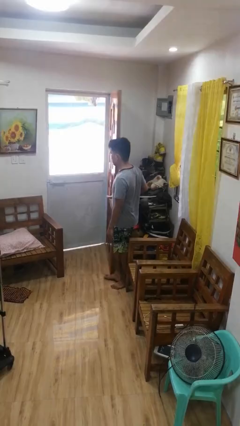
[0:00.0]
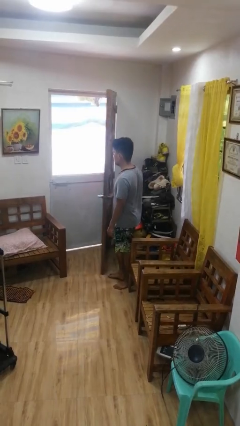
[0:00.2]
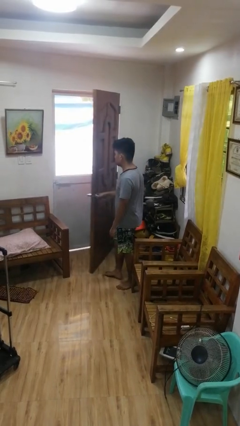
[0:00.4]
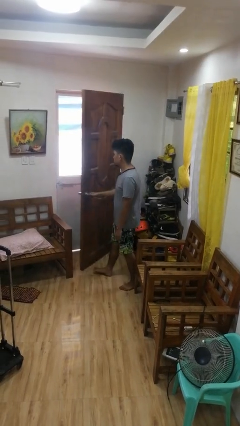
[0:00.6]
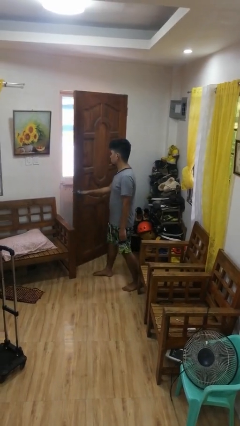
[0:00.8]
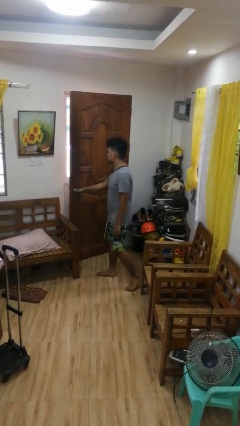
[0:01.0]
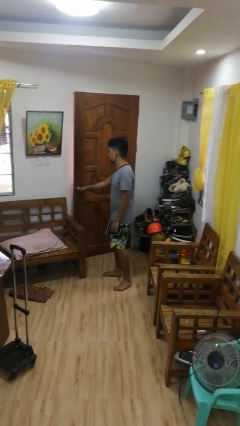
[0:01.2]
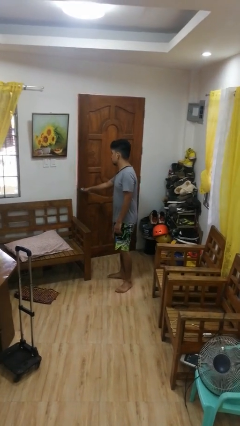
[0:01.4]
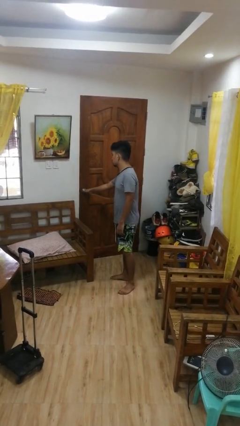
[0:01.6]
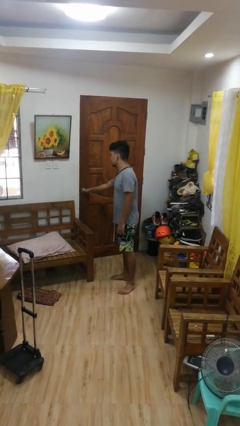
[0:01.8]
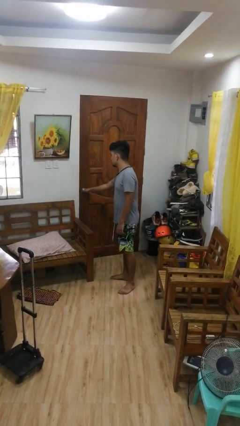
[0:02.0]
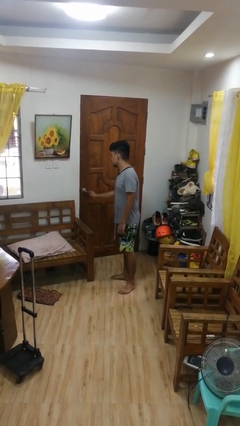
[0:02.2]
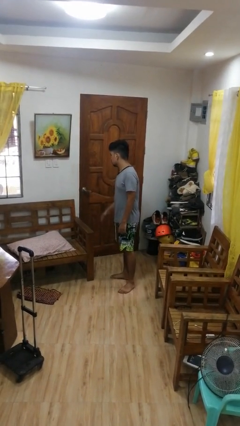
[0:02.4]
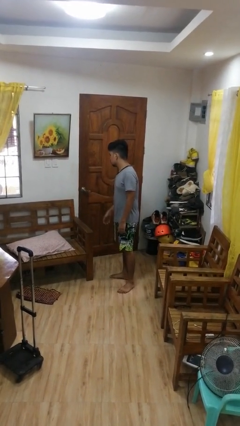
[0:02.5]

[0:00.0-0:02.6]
person closes facility door

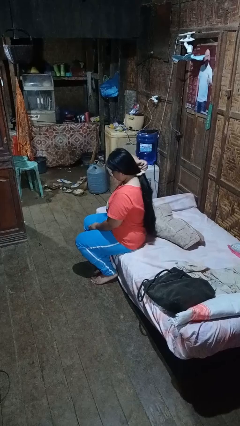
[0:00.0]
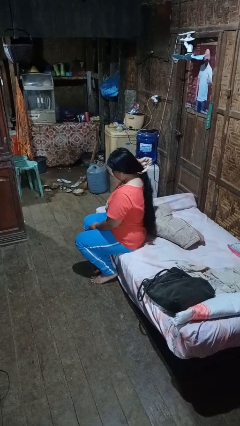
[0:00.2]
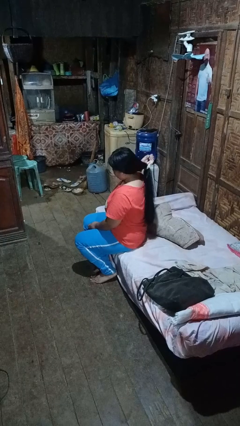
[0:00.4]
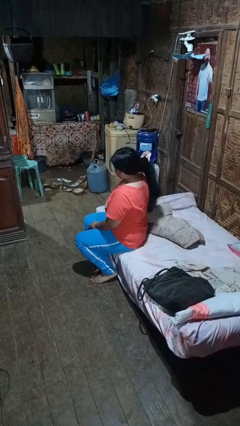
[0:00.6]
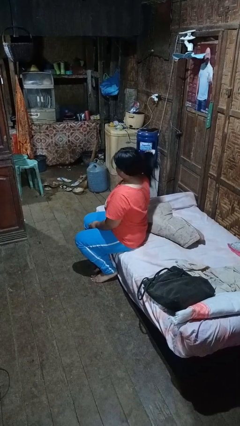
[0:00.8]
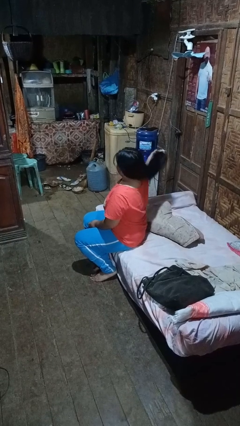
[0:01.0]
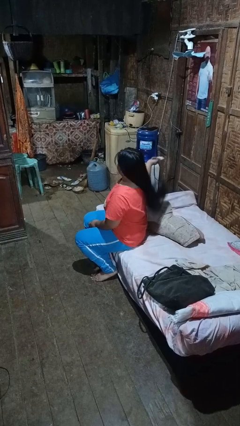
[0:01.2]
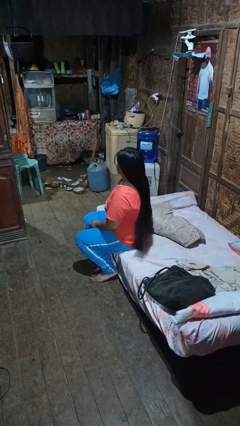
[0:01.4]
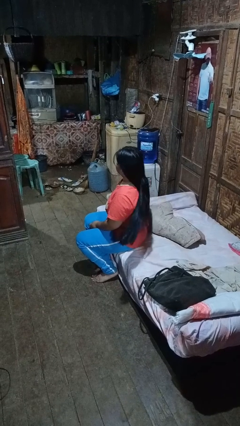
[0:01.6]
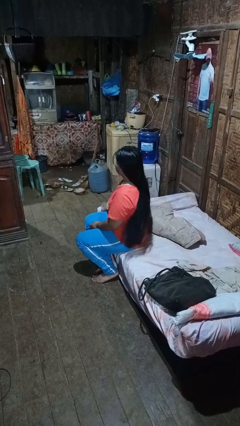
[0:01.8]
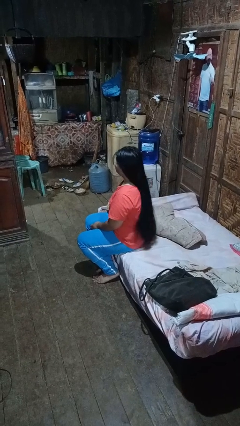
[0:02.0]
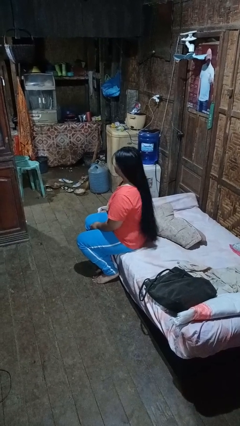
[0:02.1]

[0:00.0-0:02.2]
person takes off hairtie

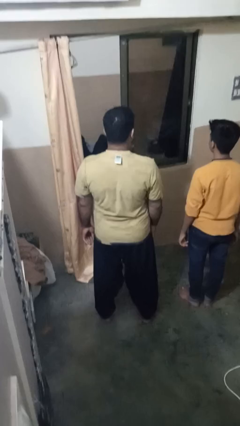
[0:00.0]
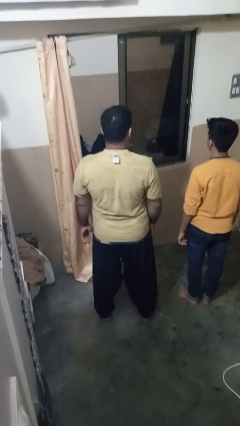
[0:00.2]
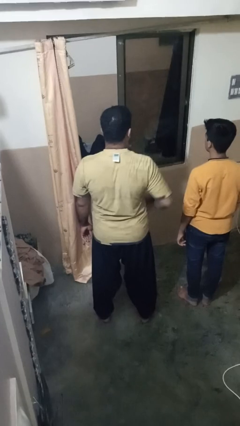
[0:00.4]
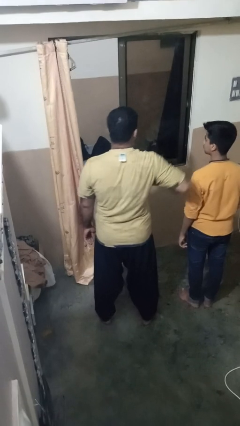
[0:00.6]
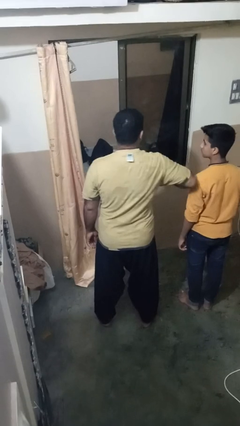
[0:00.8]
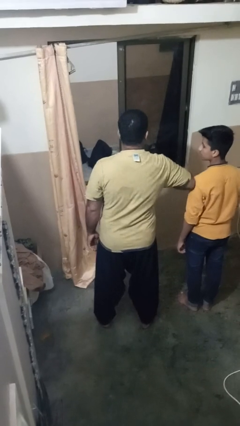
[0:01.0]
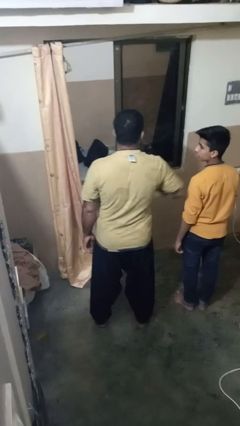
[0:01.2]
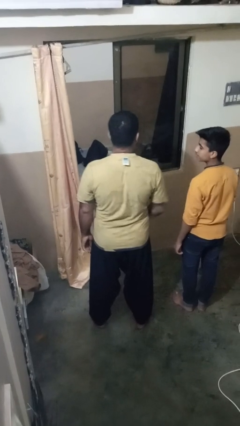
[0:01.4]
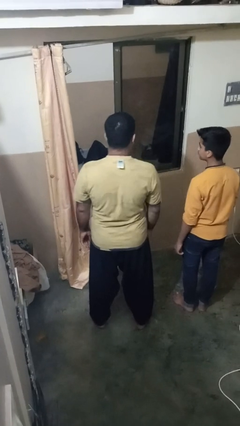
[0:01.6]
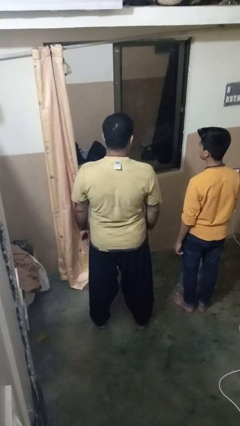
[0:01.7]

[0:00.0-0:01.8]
person nudges person with elbow

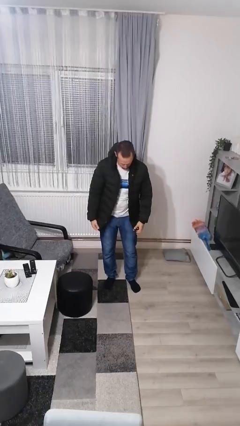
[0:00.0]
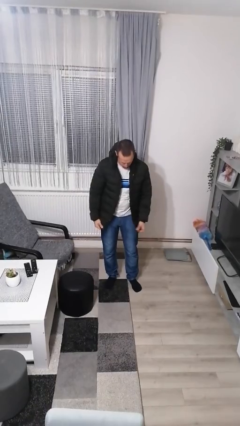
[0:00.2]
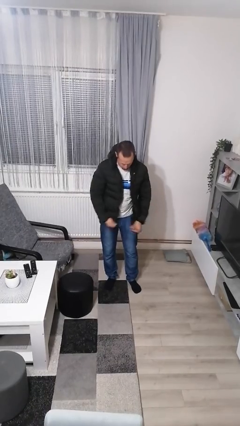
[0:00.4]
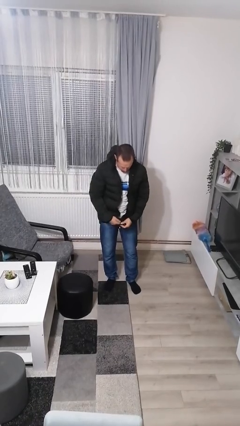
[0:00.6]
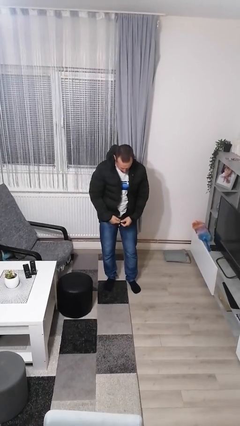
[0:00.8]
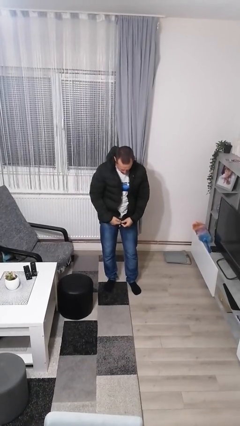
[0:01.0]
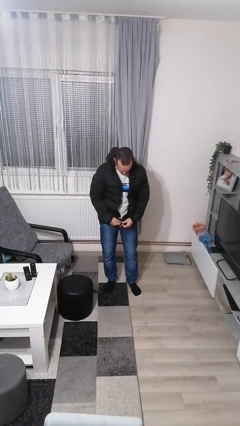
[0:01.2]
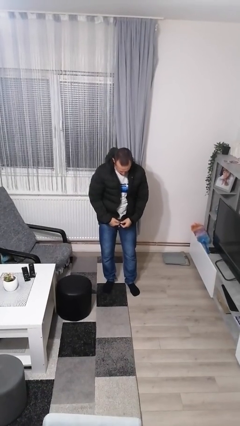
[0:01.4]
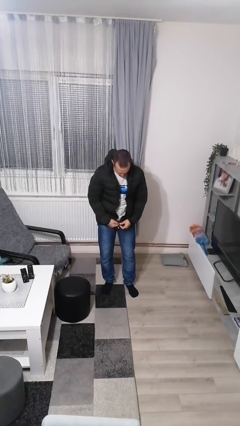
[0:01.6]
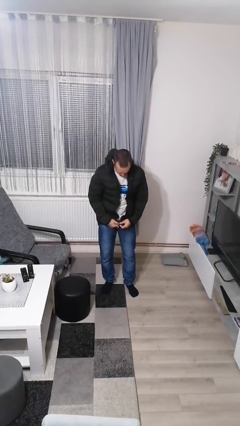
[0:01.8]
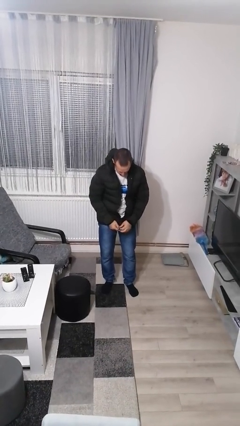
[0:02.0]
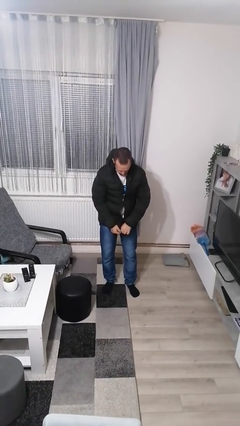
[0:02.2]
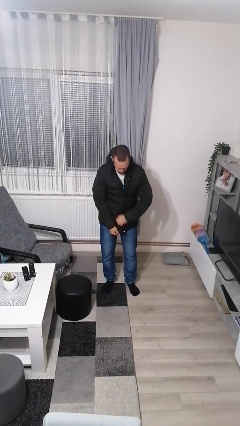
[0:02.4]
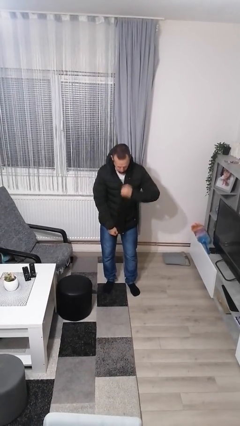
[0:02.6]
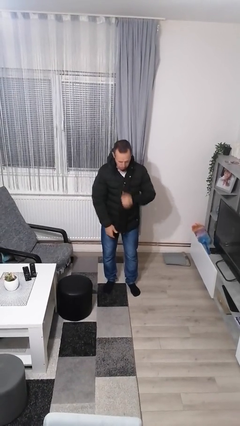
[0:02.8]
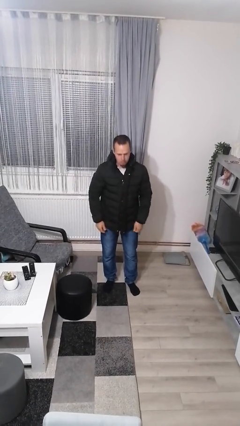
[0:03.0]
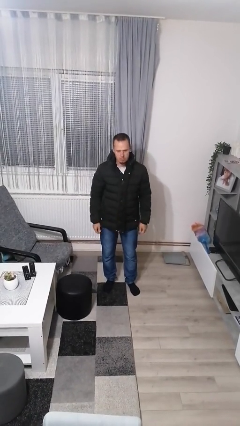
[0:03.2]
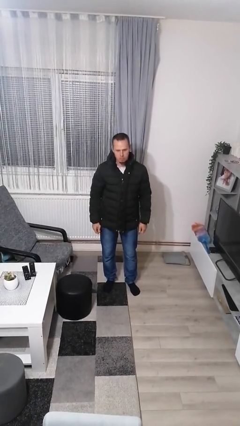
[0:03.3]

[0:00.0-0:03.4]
person zips up jacket

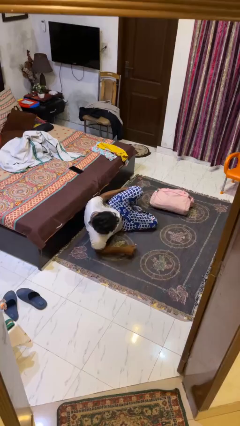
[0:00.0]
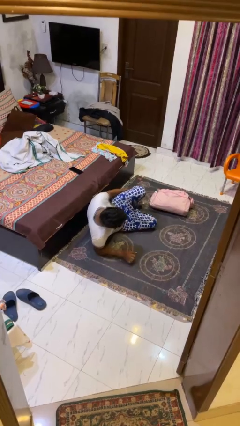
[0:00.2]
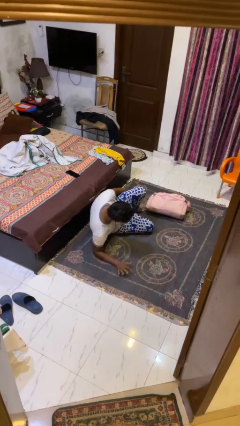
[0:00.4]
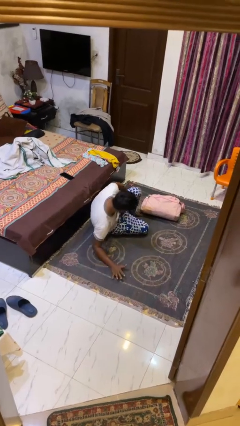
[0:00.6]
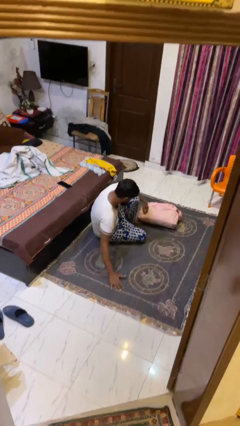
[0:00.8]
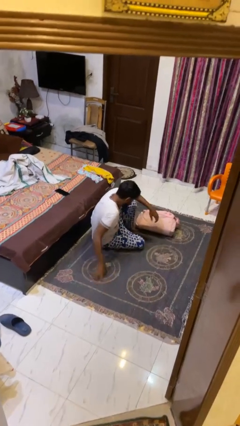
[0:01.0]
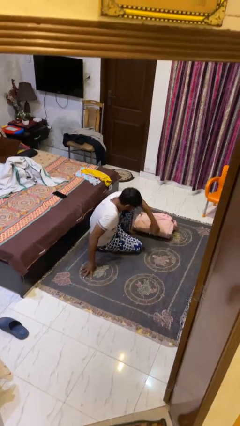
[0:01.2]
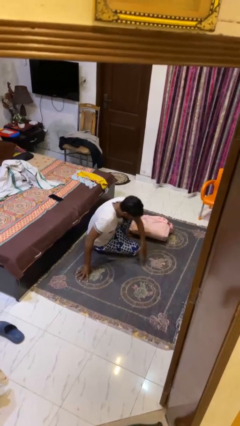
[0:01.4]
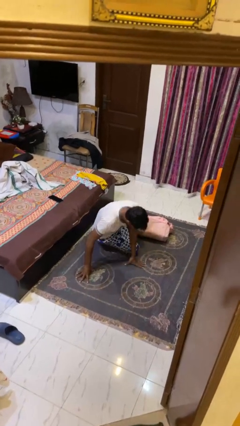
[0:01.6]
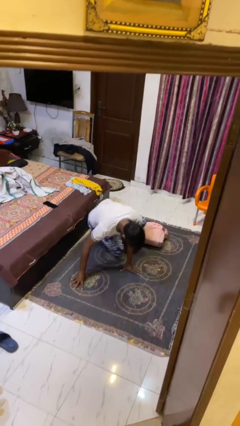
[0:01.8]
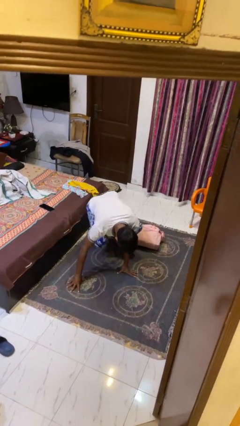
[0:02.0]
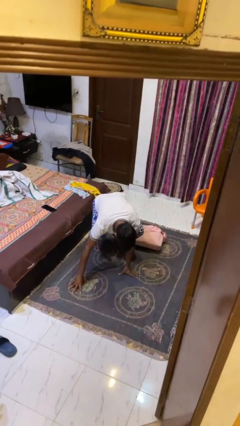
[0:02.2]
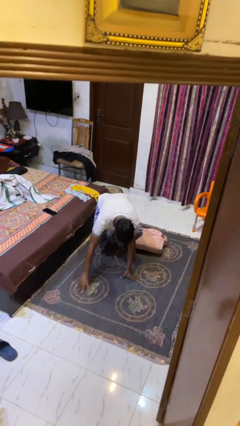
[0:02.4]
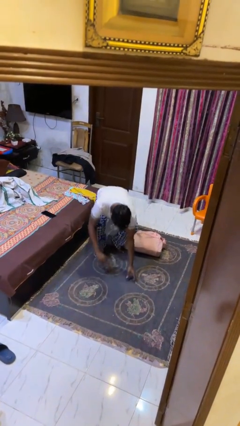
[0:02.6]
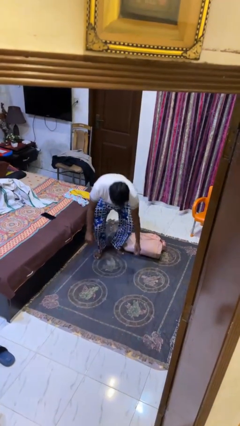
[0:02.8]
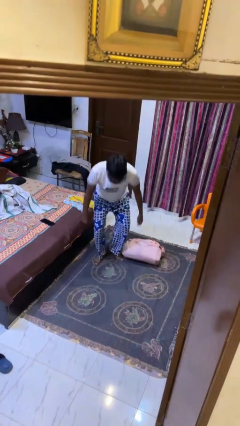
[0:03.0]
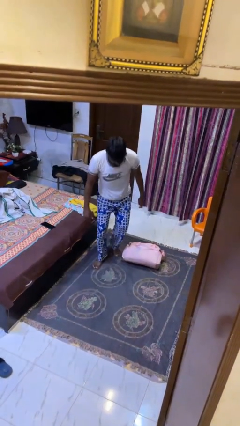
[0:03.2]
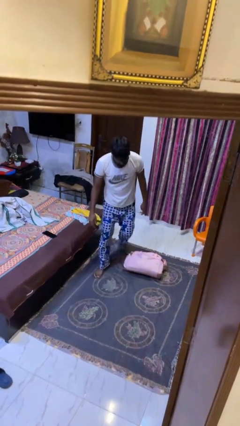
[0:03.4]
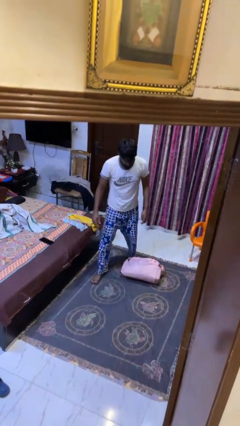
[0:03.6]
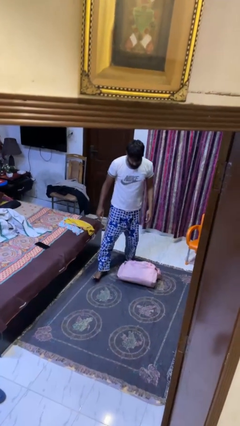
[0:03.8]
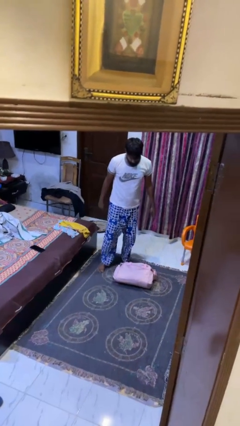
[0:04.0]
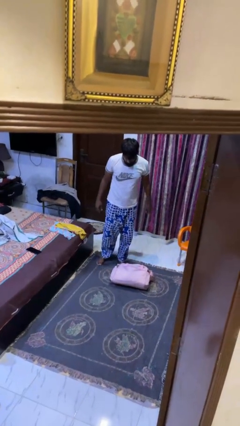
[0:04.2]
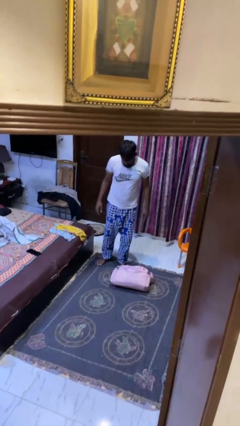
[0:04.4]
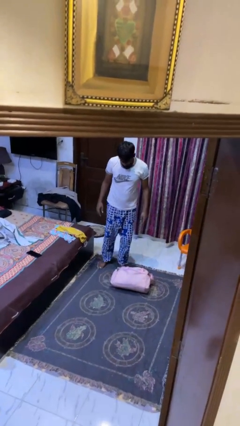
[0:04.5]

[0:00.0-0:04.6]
person stands up from floor

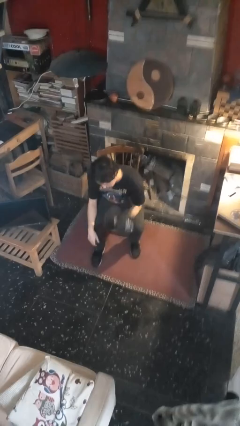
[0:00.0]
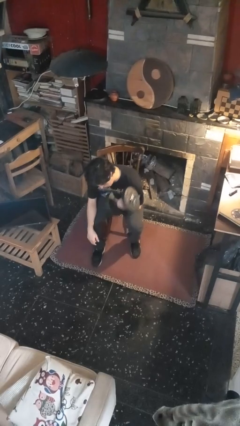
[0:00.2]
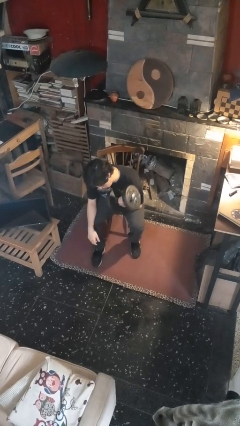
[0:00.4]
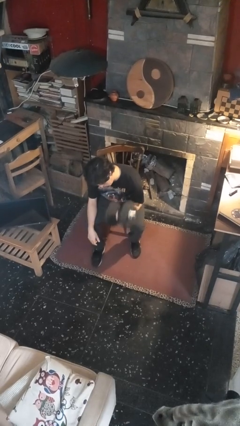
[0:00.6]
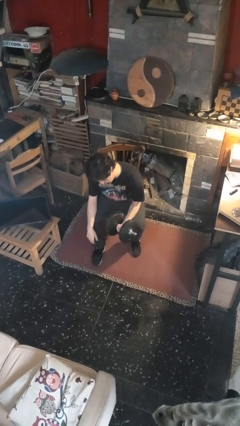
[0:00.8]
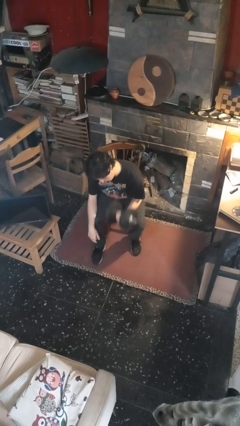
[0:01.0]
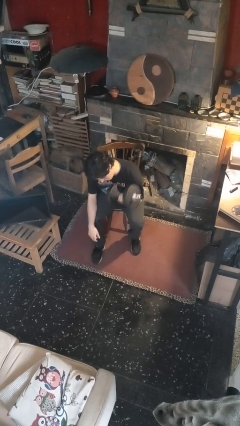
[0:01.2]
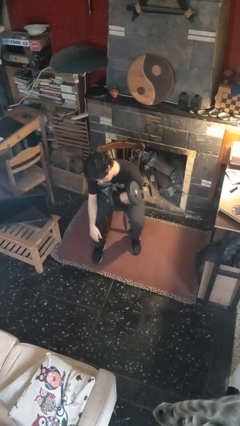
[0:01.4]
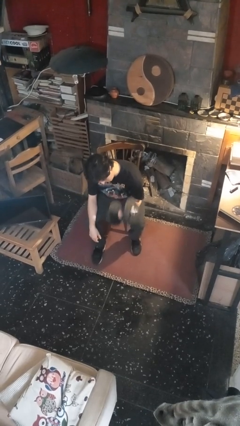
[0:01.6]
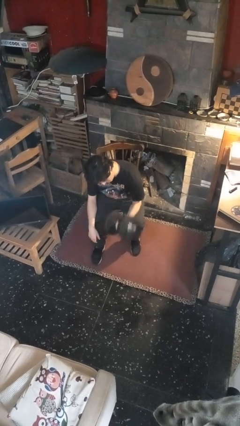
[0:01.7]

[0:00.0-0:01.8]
person lifts dumbbells

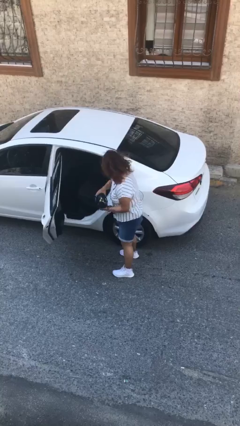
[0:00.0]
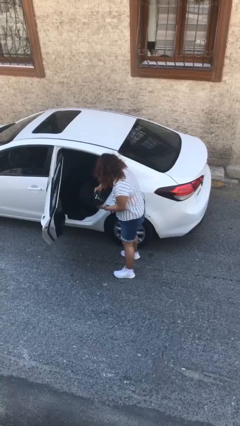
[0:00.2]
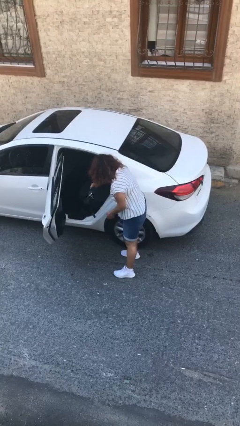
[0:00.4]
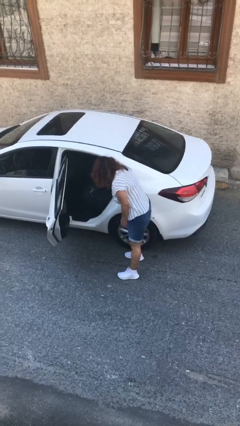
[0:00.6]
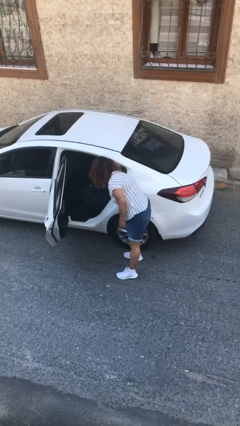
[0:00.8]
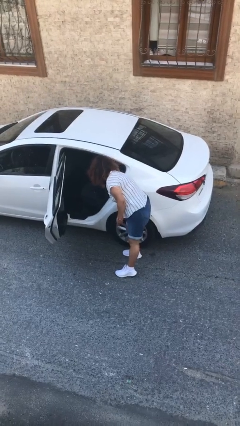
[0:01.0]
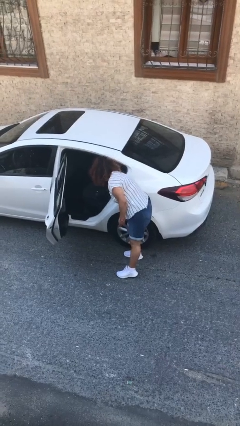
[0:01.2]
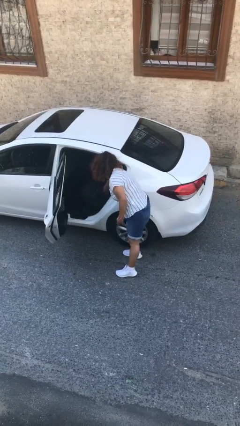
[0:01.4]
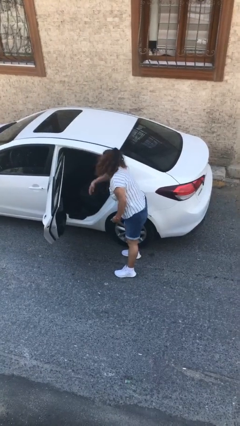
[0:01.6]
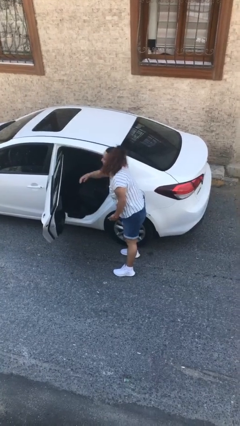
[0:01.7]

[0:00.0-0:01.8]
person loads car
